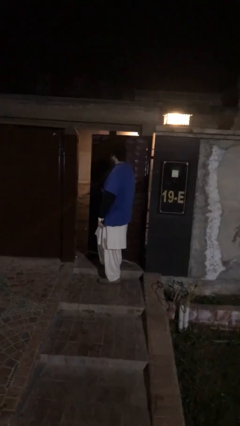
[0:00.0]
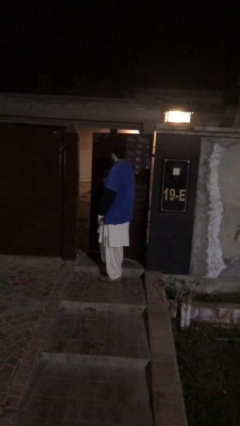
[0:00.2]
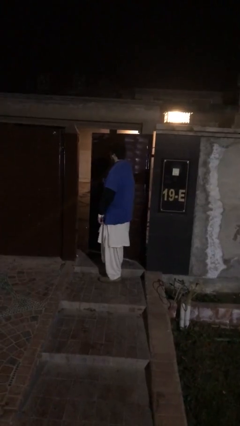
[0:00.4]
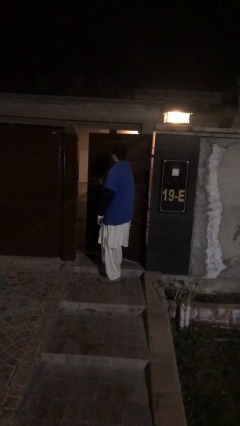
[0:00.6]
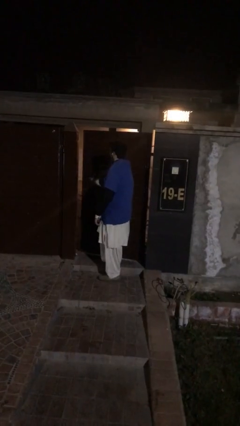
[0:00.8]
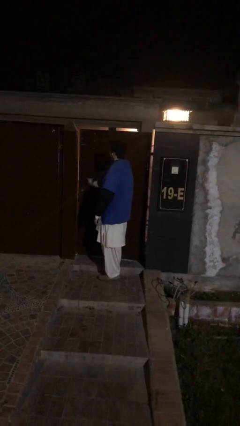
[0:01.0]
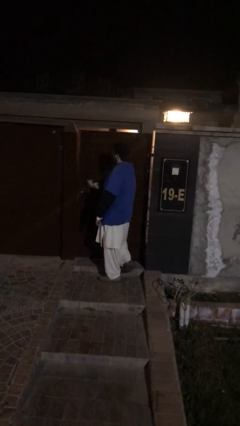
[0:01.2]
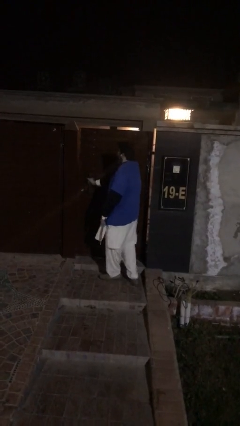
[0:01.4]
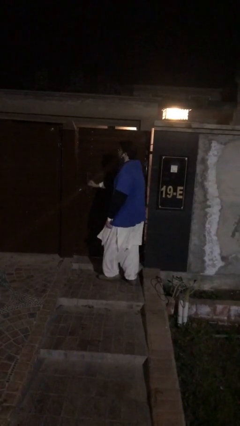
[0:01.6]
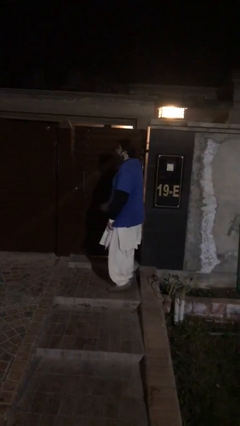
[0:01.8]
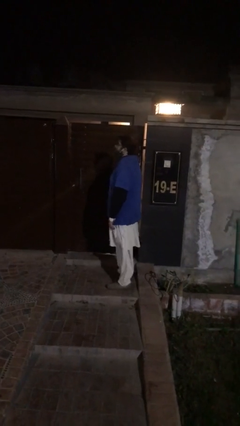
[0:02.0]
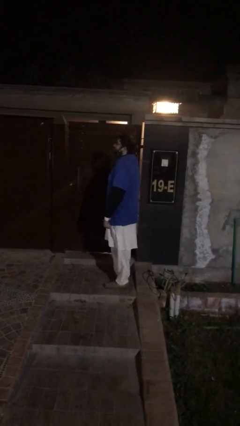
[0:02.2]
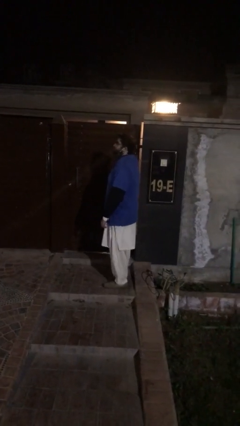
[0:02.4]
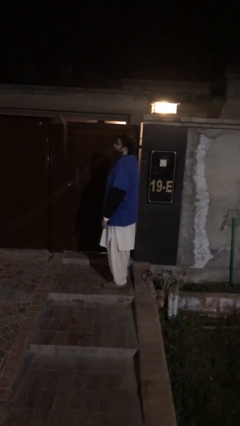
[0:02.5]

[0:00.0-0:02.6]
person closes facility door

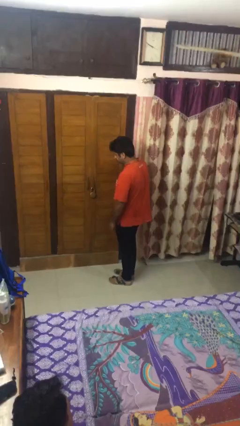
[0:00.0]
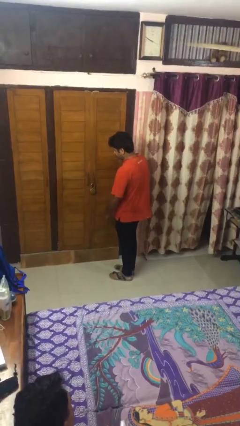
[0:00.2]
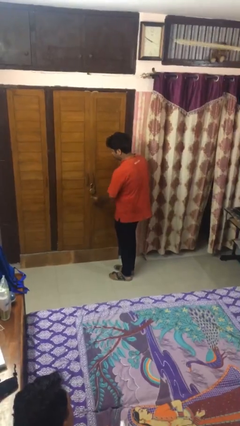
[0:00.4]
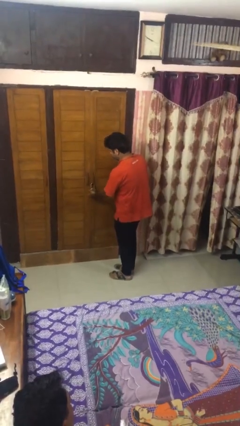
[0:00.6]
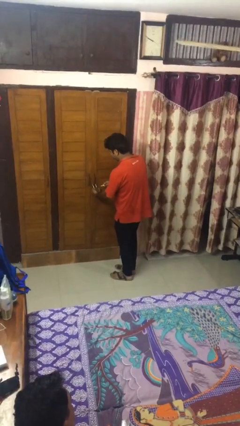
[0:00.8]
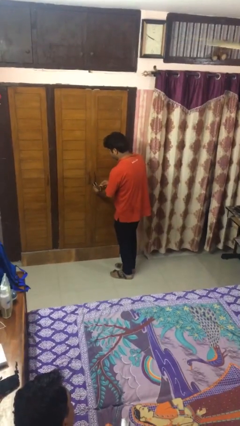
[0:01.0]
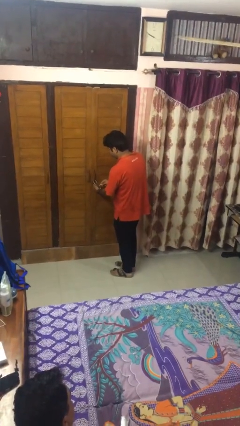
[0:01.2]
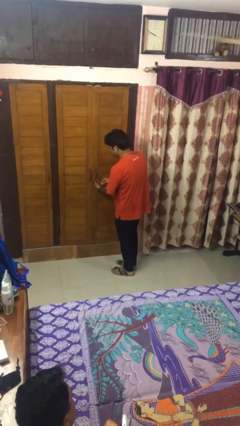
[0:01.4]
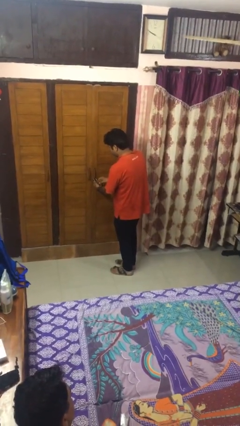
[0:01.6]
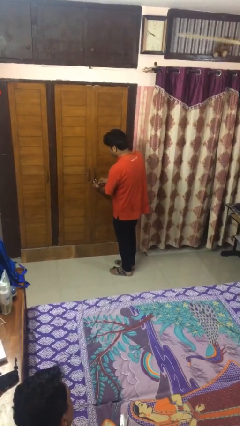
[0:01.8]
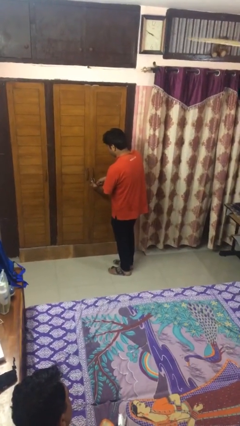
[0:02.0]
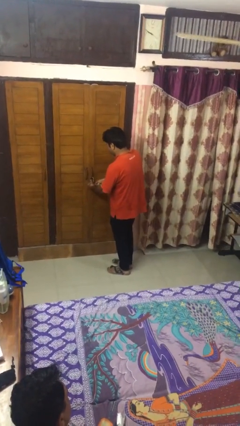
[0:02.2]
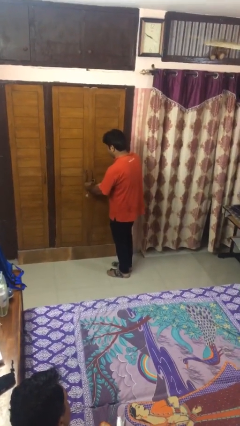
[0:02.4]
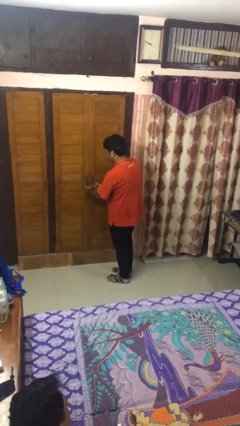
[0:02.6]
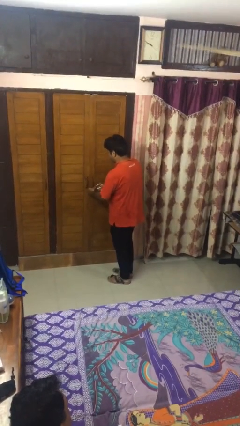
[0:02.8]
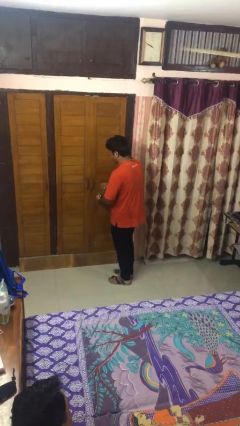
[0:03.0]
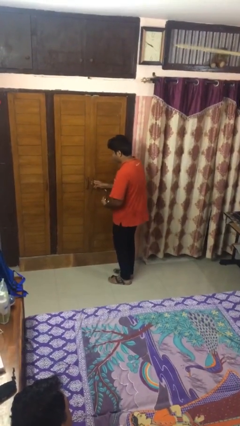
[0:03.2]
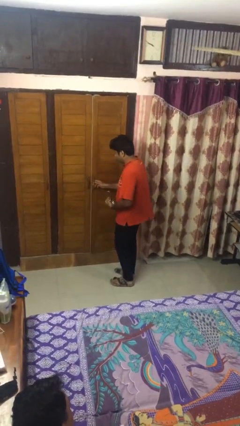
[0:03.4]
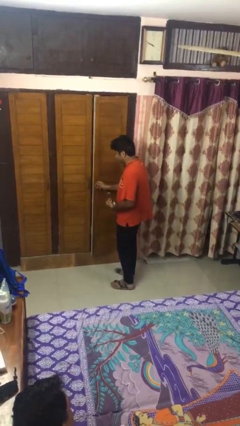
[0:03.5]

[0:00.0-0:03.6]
person unlocks door with keys

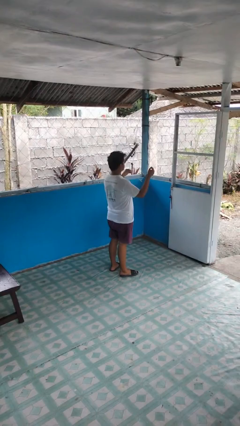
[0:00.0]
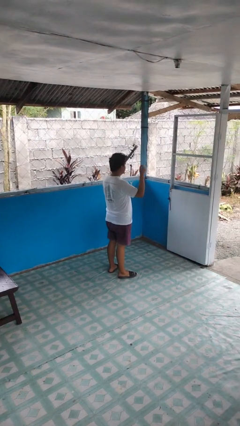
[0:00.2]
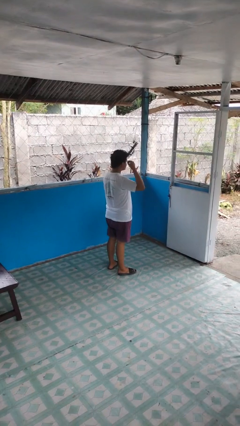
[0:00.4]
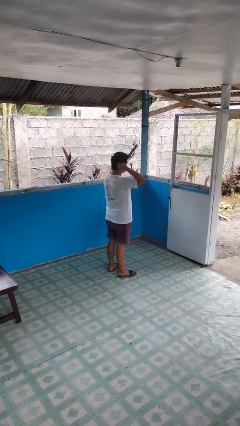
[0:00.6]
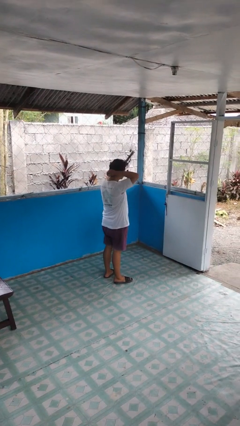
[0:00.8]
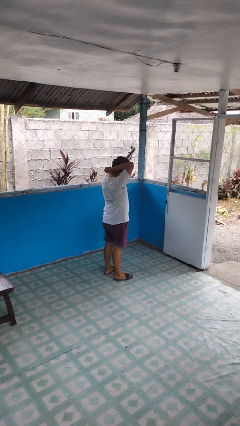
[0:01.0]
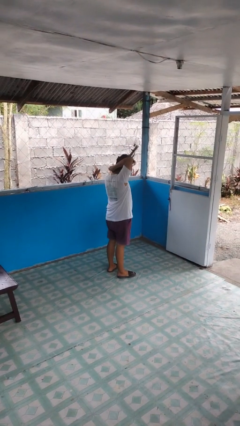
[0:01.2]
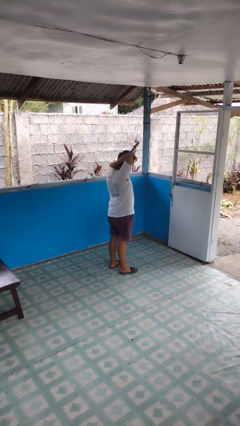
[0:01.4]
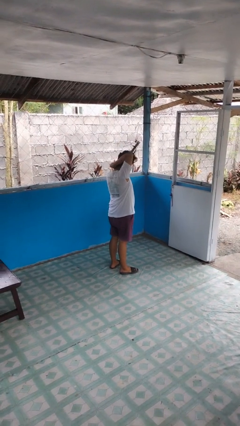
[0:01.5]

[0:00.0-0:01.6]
person puts on necklace

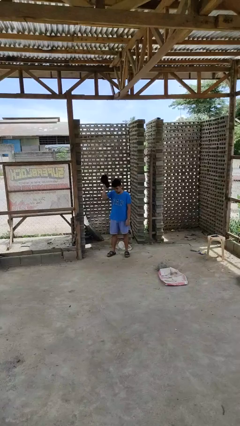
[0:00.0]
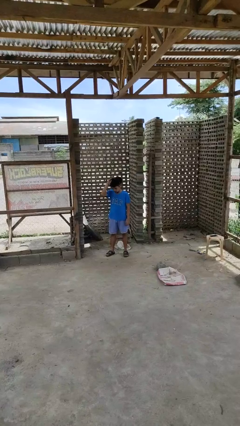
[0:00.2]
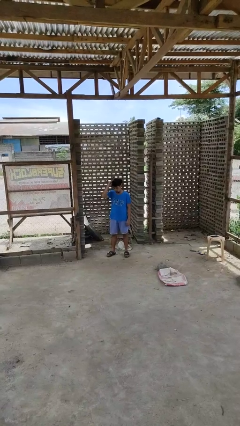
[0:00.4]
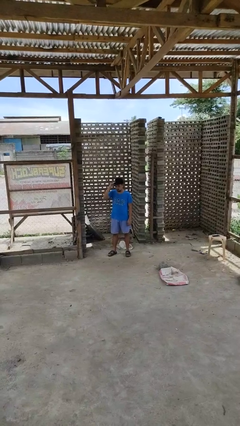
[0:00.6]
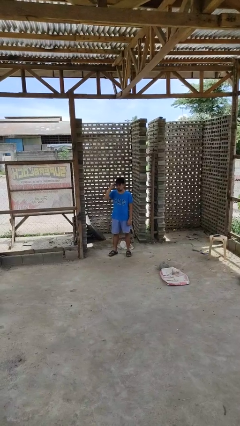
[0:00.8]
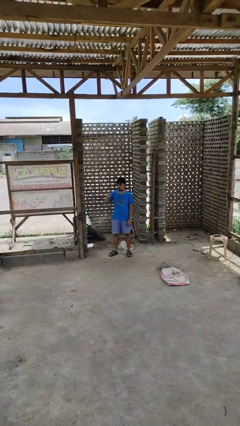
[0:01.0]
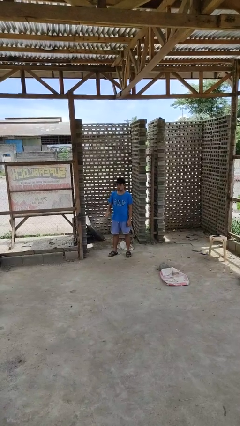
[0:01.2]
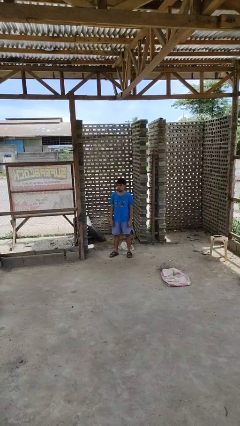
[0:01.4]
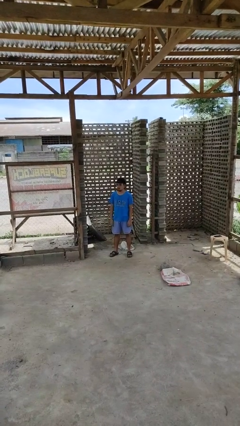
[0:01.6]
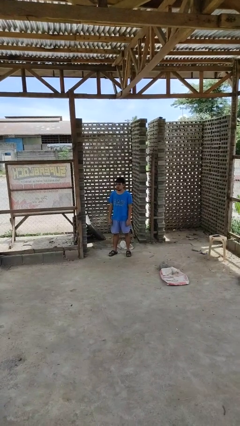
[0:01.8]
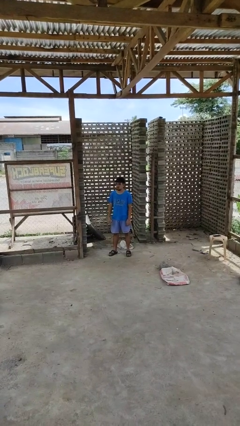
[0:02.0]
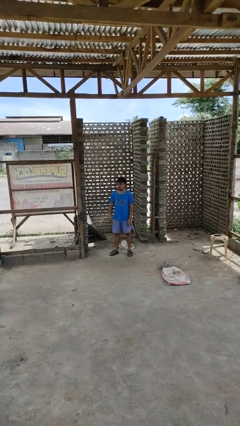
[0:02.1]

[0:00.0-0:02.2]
person puts on hat

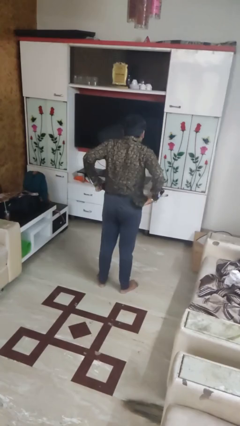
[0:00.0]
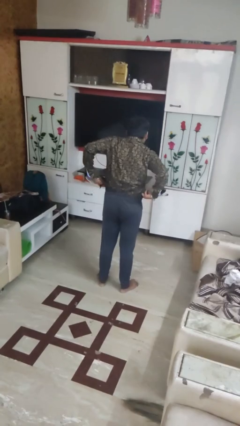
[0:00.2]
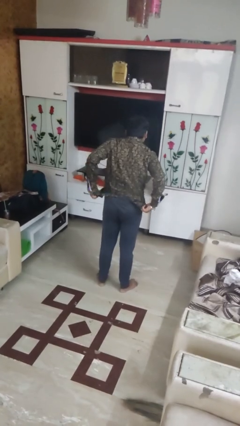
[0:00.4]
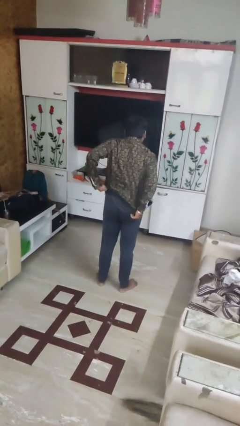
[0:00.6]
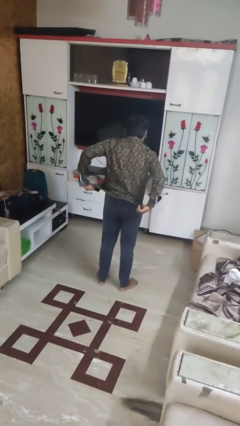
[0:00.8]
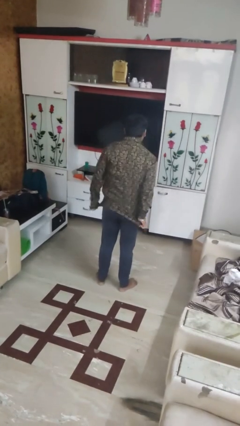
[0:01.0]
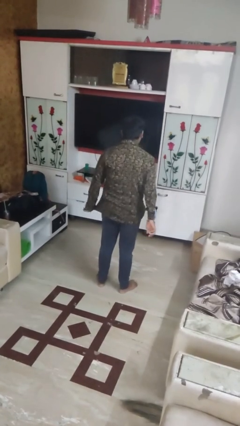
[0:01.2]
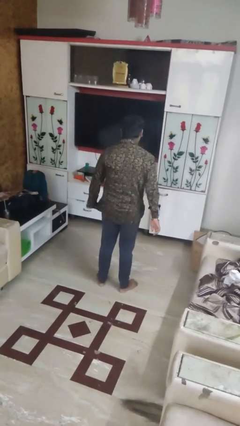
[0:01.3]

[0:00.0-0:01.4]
person untucks shirt

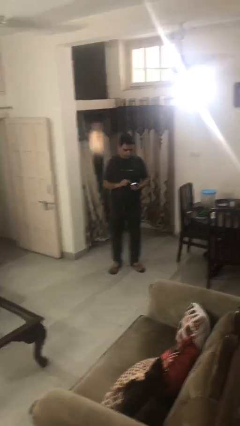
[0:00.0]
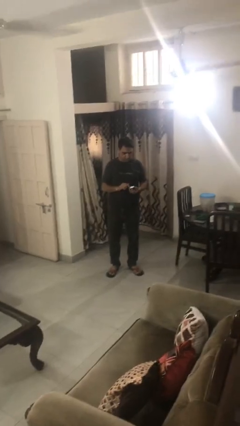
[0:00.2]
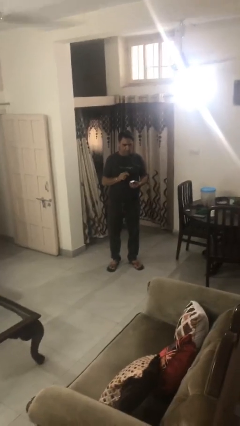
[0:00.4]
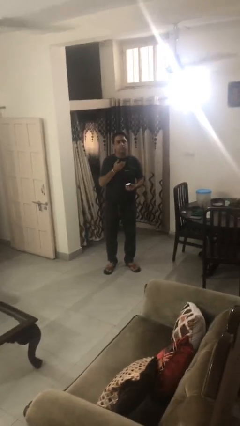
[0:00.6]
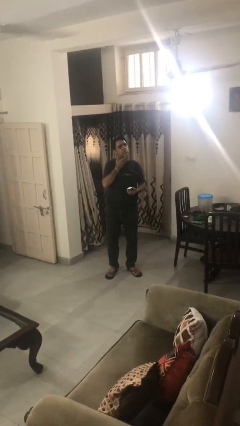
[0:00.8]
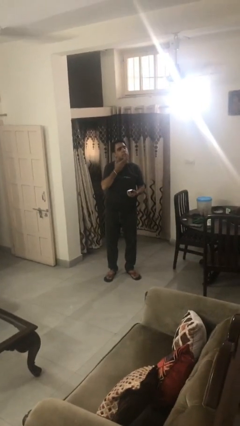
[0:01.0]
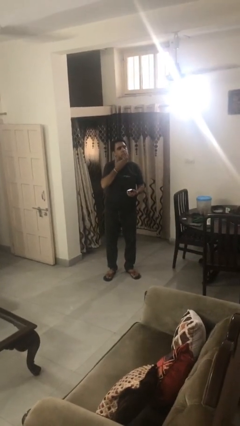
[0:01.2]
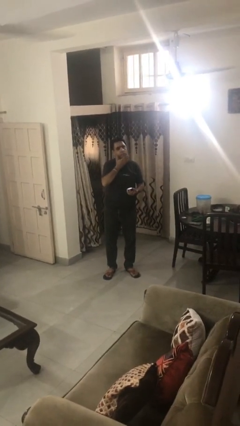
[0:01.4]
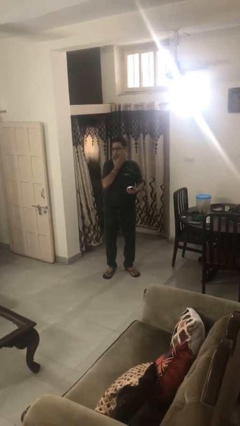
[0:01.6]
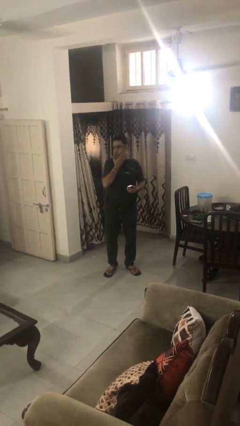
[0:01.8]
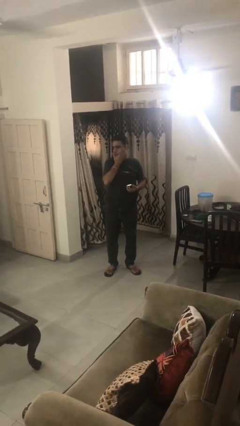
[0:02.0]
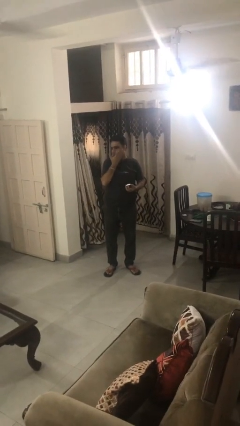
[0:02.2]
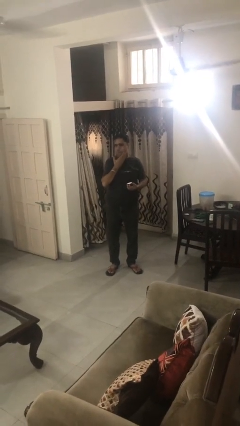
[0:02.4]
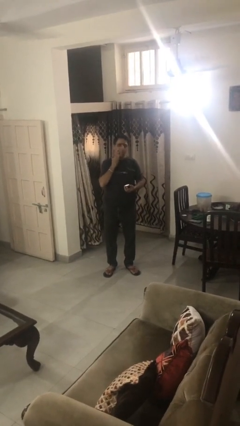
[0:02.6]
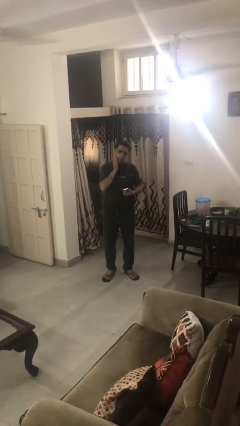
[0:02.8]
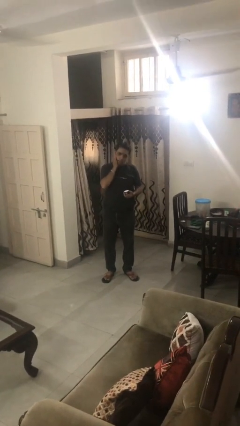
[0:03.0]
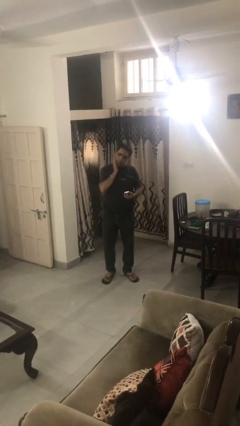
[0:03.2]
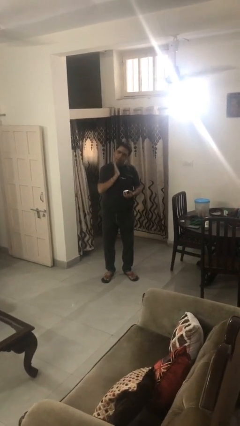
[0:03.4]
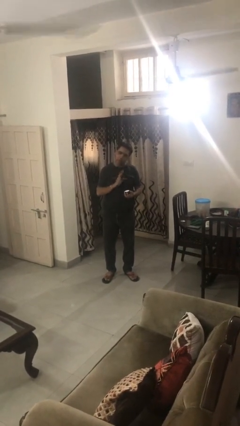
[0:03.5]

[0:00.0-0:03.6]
person applies facial moisturizer

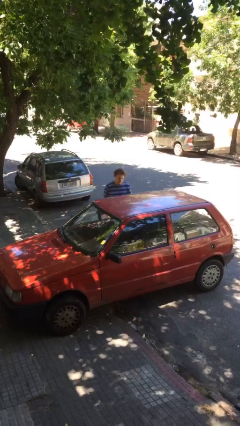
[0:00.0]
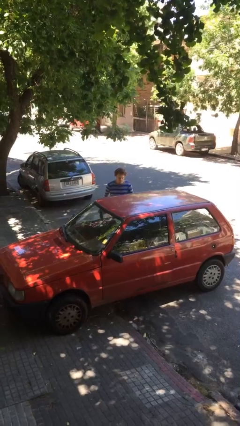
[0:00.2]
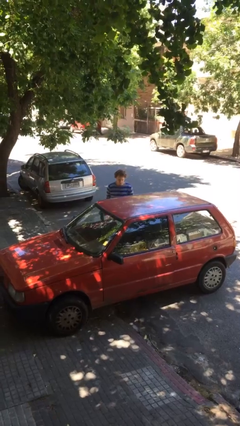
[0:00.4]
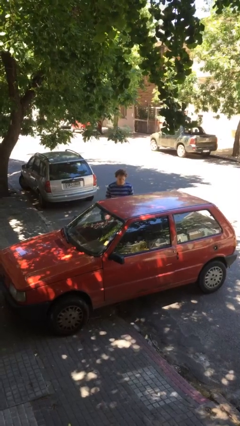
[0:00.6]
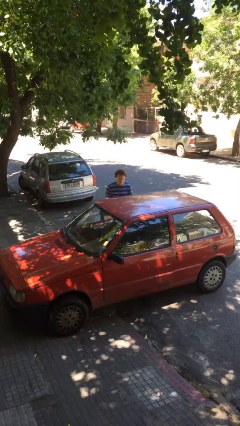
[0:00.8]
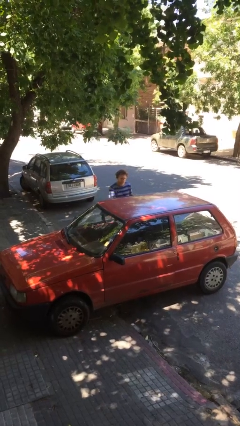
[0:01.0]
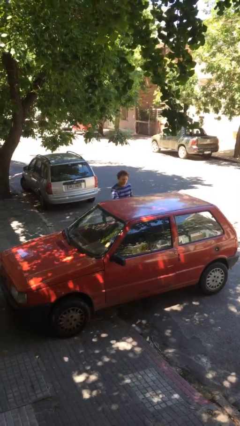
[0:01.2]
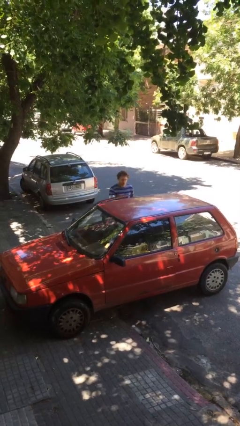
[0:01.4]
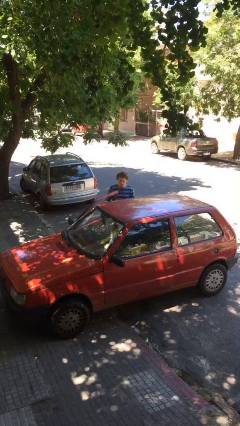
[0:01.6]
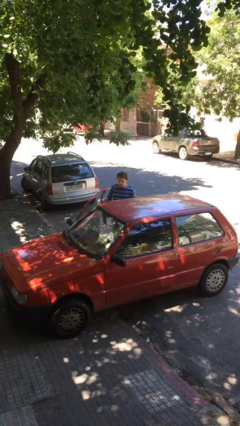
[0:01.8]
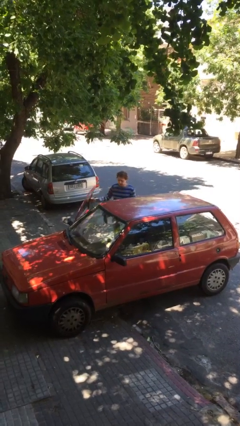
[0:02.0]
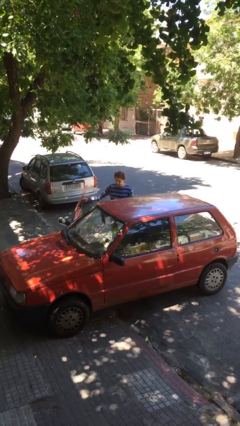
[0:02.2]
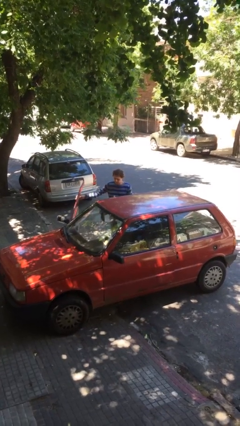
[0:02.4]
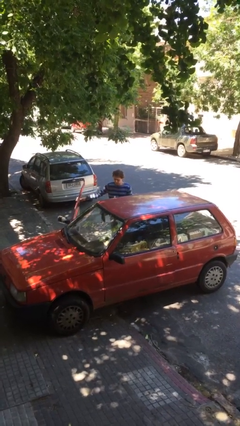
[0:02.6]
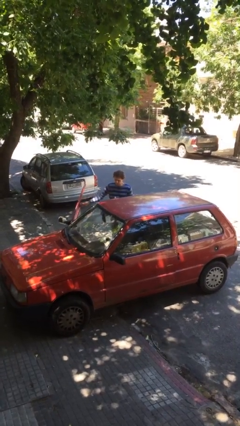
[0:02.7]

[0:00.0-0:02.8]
person opens car door
